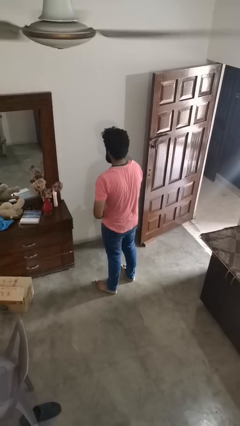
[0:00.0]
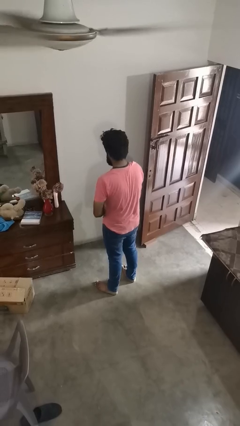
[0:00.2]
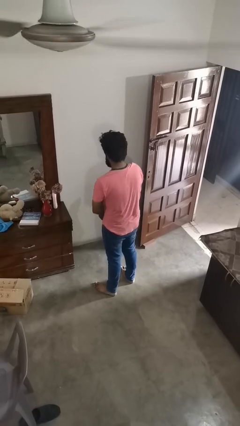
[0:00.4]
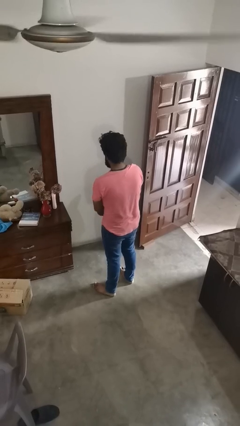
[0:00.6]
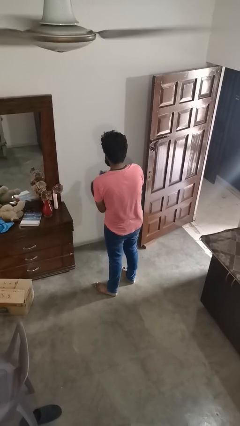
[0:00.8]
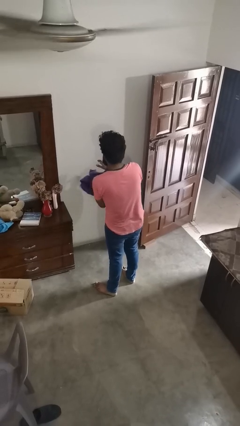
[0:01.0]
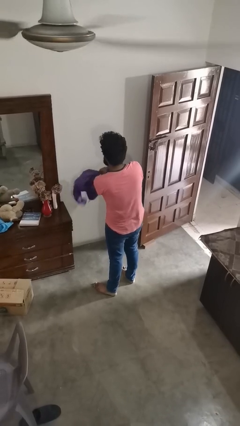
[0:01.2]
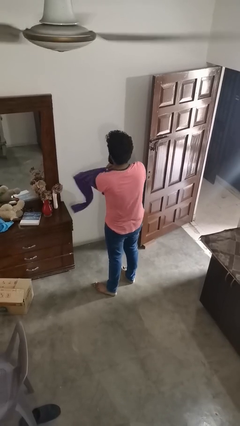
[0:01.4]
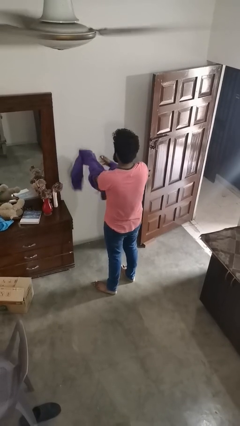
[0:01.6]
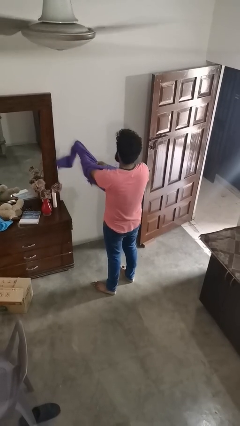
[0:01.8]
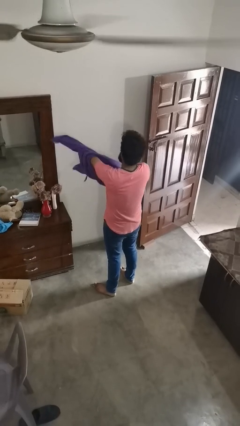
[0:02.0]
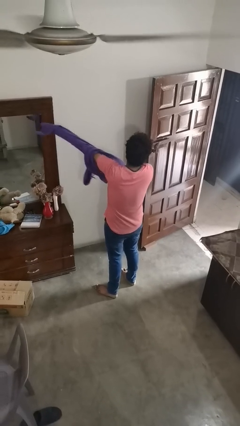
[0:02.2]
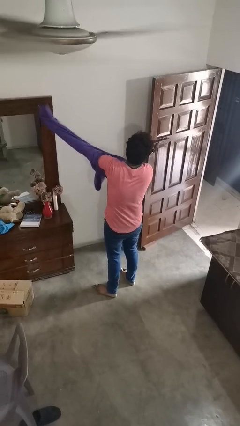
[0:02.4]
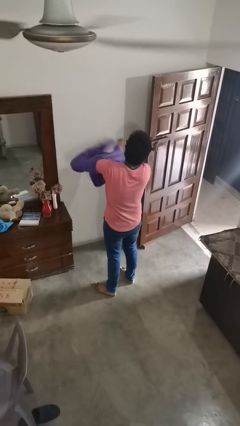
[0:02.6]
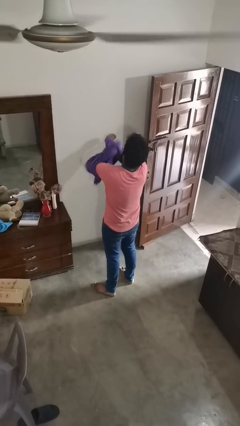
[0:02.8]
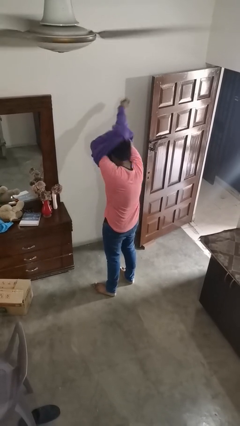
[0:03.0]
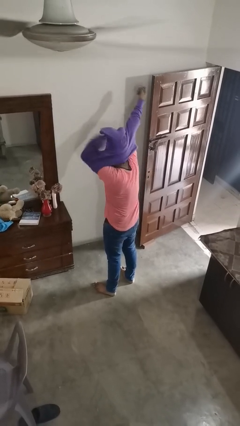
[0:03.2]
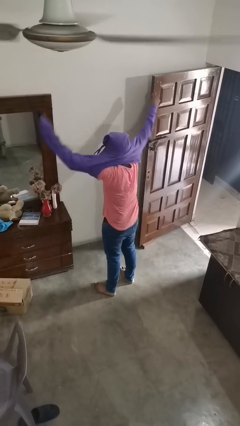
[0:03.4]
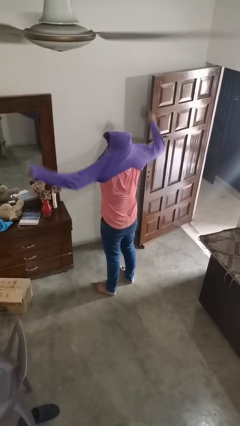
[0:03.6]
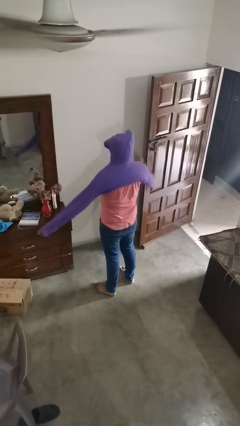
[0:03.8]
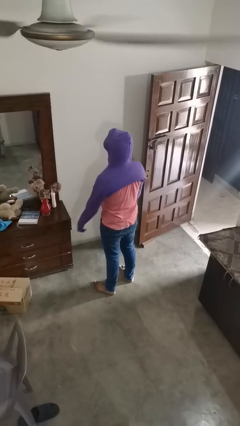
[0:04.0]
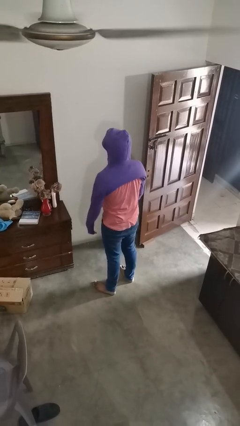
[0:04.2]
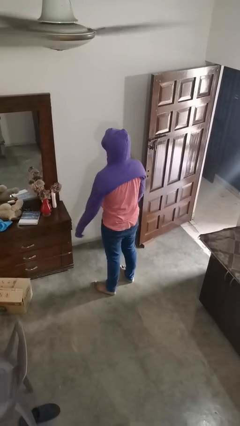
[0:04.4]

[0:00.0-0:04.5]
person puts on hoodie

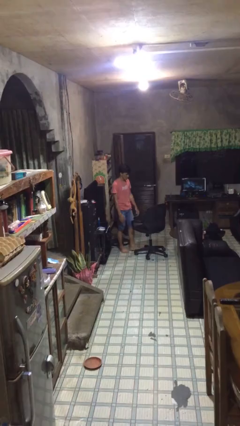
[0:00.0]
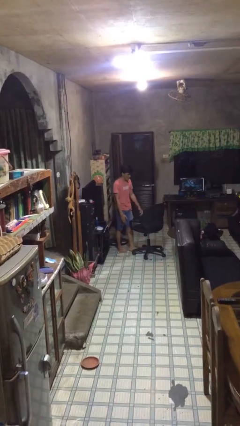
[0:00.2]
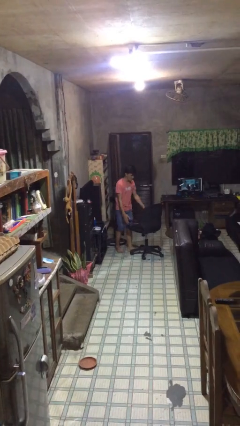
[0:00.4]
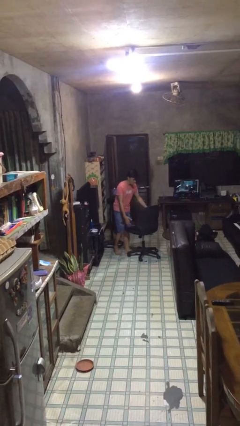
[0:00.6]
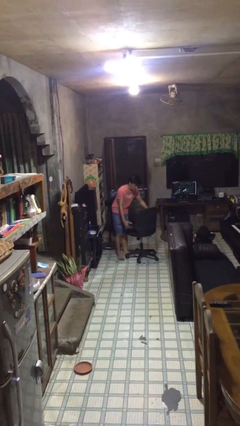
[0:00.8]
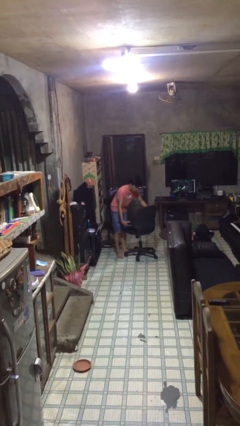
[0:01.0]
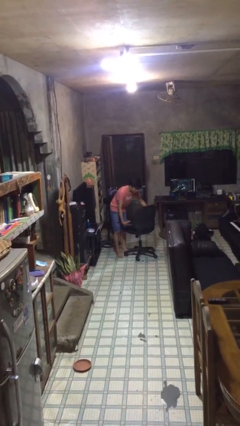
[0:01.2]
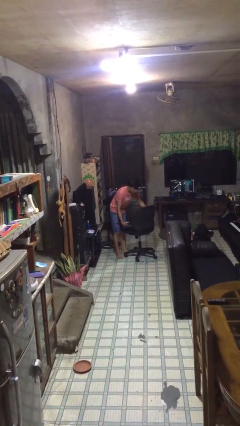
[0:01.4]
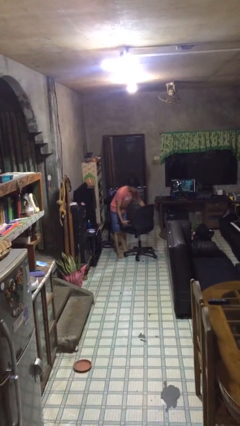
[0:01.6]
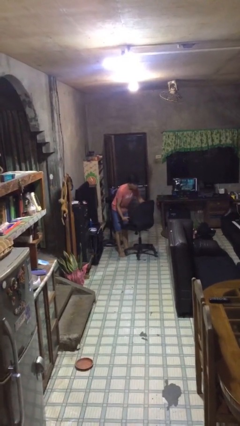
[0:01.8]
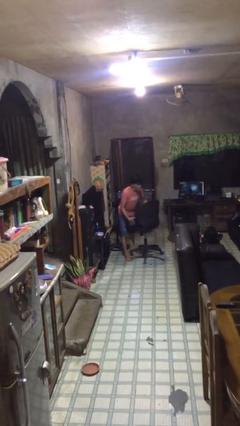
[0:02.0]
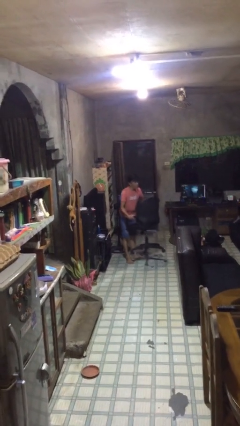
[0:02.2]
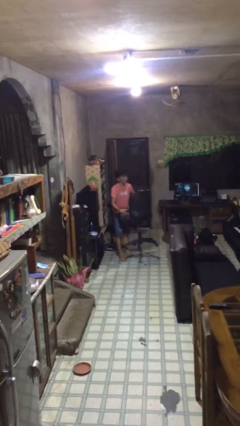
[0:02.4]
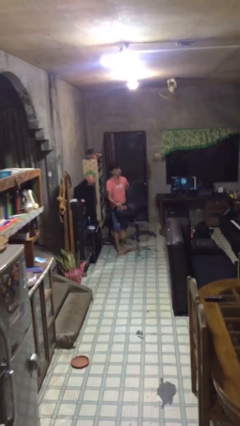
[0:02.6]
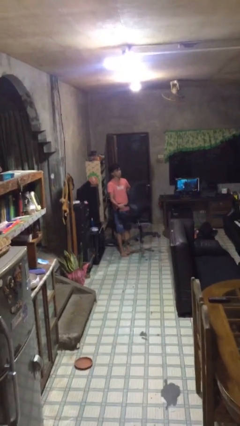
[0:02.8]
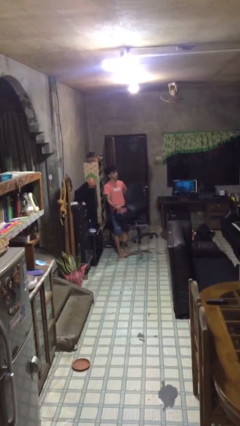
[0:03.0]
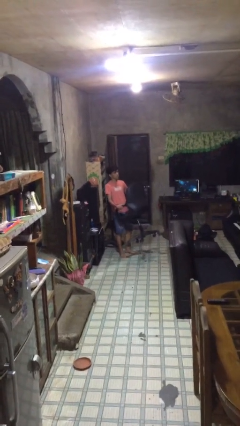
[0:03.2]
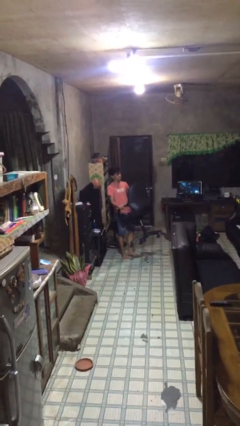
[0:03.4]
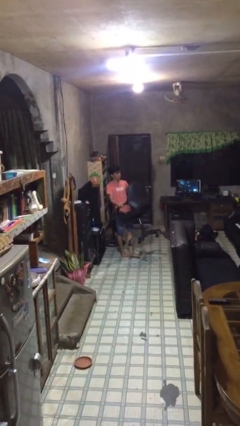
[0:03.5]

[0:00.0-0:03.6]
person picks up object from floor

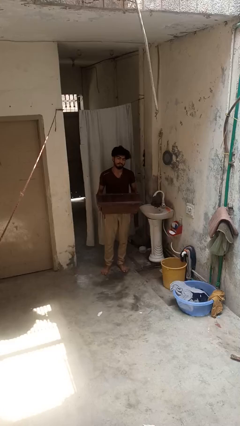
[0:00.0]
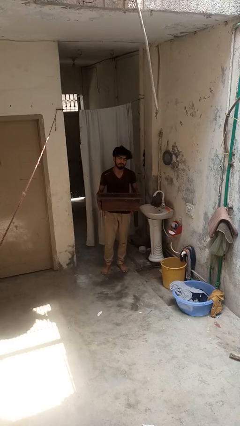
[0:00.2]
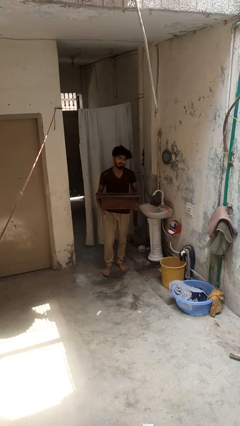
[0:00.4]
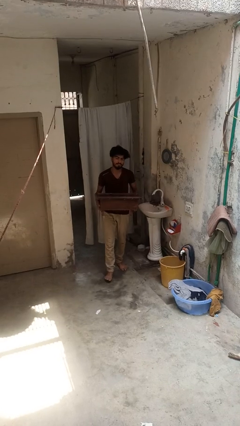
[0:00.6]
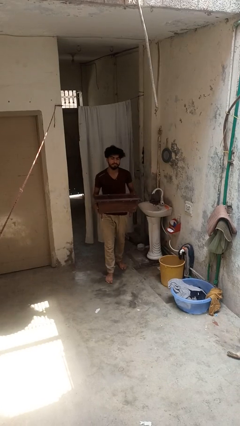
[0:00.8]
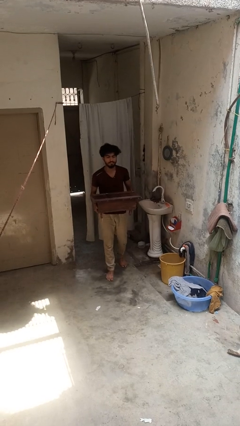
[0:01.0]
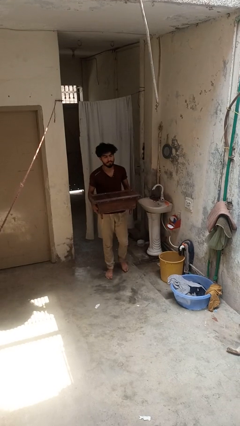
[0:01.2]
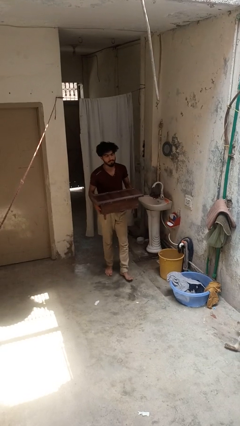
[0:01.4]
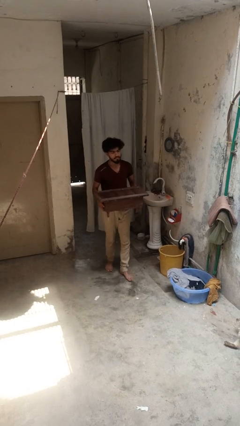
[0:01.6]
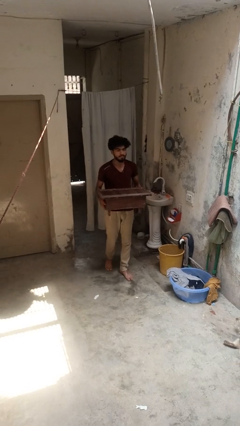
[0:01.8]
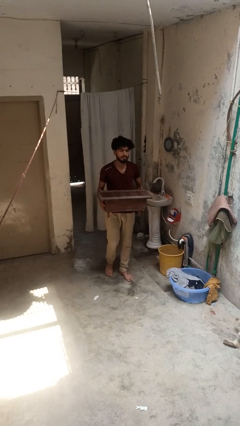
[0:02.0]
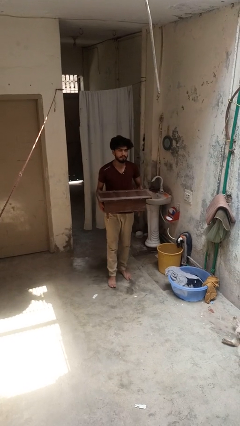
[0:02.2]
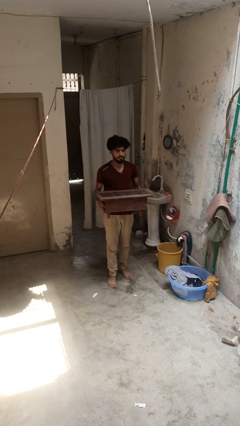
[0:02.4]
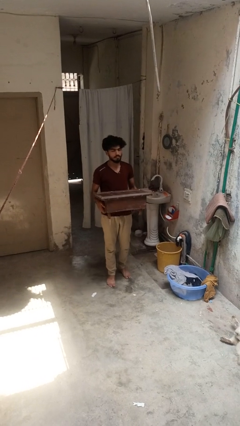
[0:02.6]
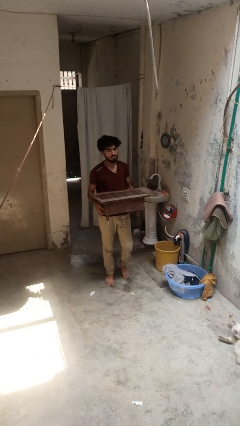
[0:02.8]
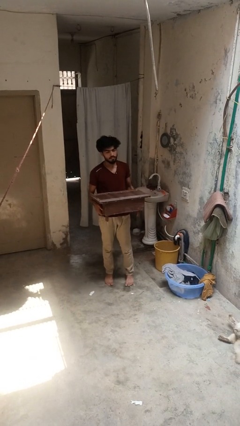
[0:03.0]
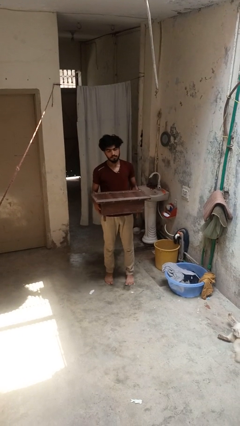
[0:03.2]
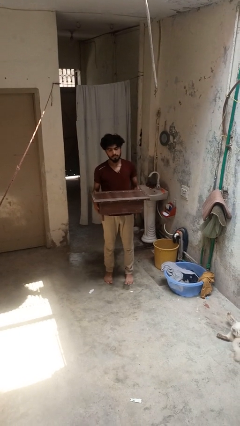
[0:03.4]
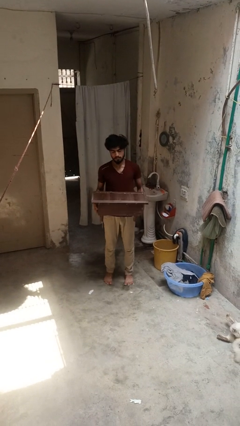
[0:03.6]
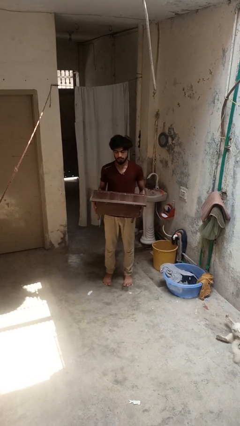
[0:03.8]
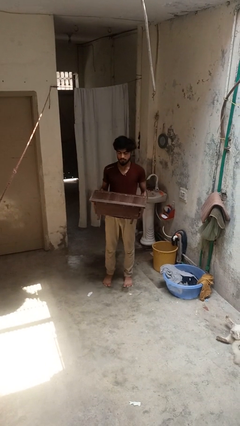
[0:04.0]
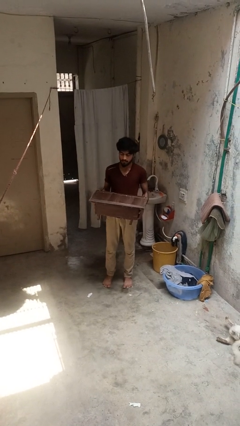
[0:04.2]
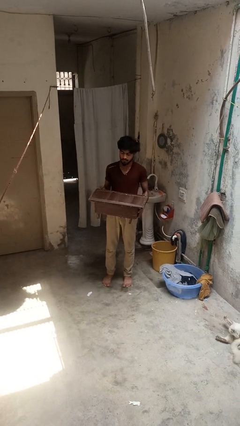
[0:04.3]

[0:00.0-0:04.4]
person carries furniture

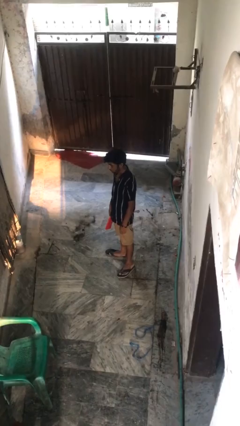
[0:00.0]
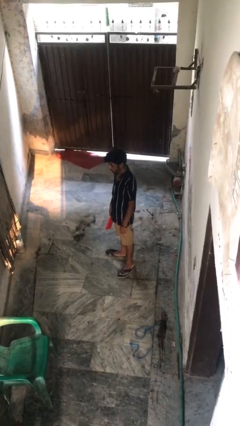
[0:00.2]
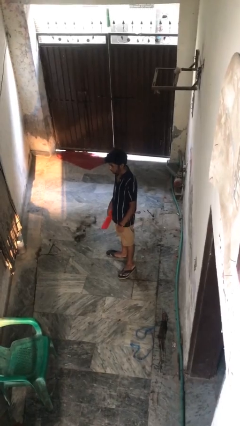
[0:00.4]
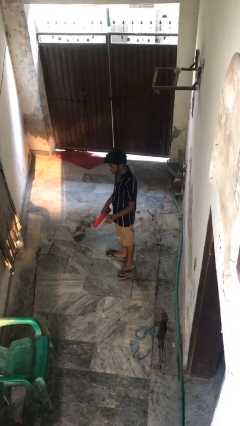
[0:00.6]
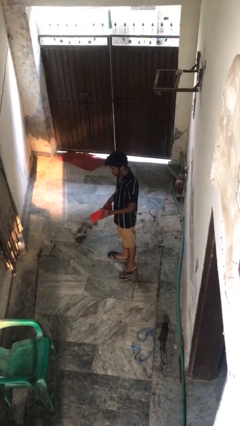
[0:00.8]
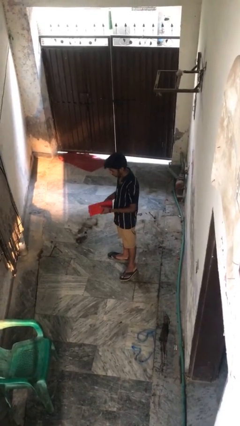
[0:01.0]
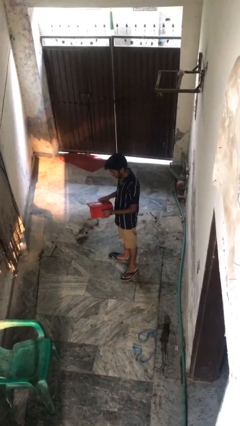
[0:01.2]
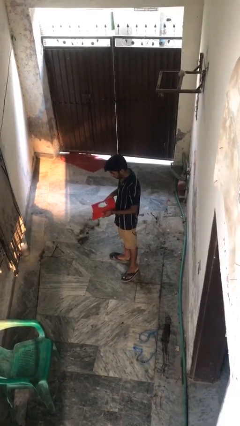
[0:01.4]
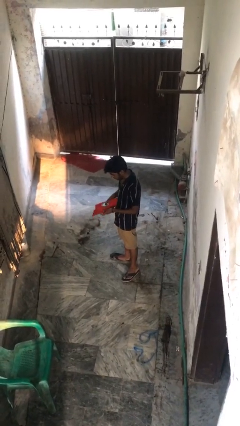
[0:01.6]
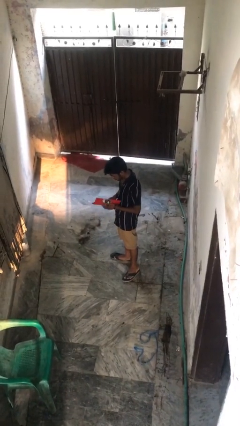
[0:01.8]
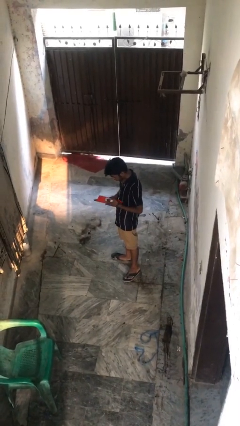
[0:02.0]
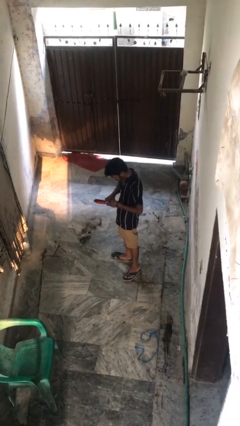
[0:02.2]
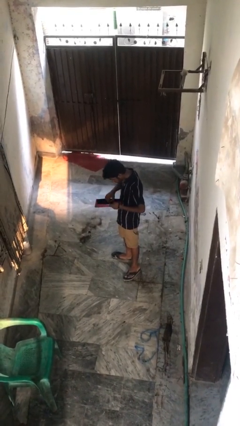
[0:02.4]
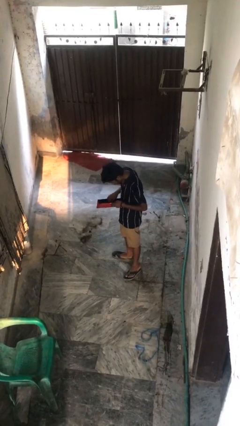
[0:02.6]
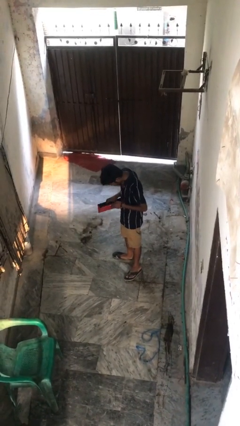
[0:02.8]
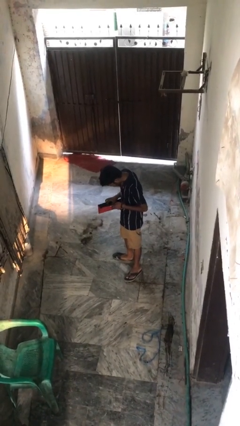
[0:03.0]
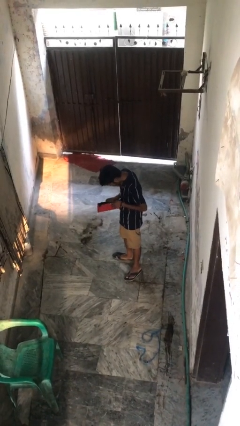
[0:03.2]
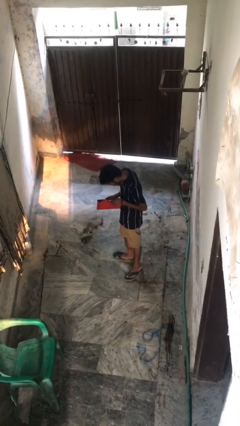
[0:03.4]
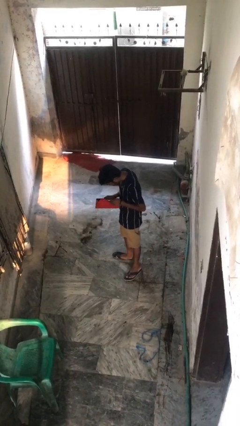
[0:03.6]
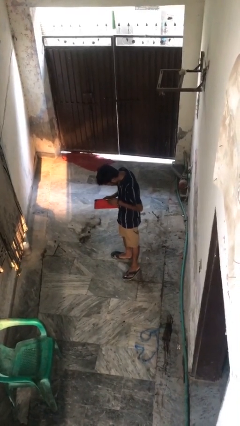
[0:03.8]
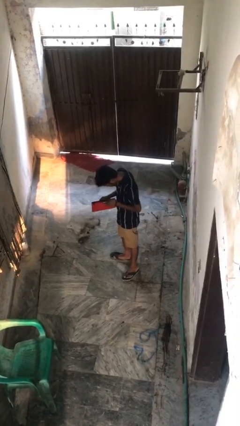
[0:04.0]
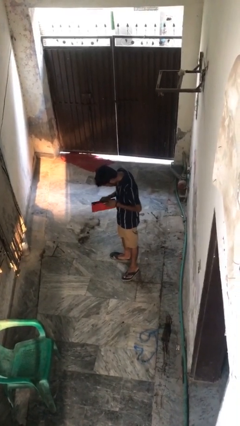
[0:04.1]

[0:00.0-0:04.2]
person searches in purse

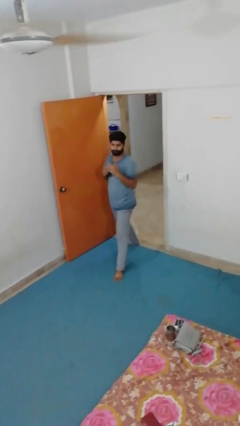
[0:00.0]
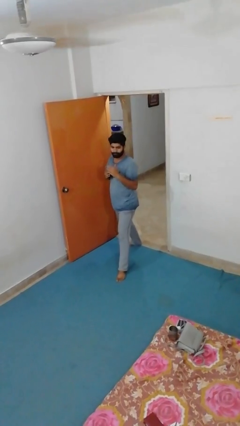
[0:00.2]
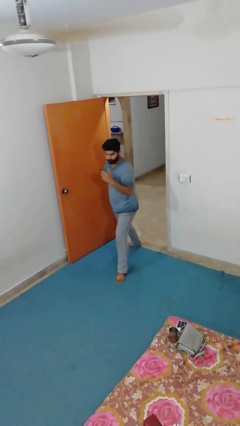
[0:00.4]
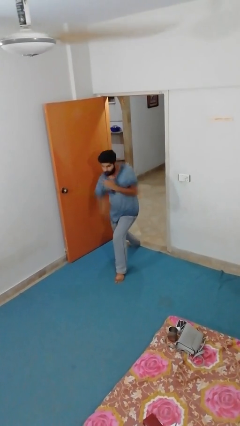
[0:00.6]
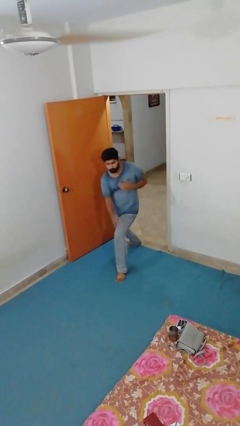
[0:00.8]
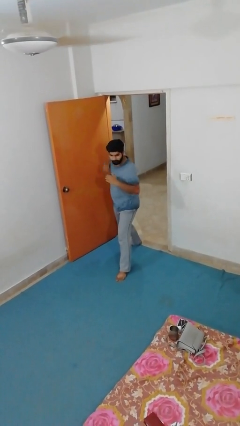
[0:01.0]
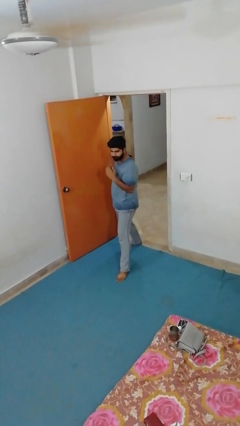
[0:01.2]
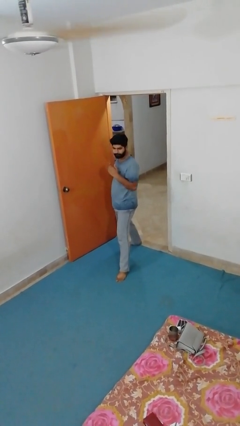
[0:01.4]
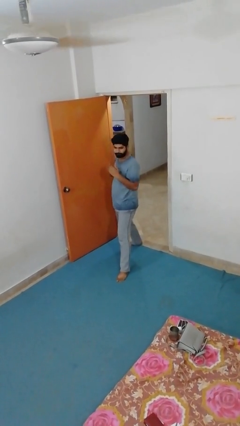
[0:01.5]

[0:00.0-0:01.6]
person karate chop
